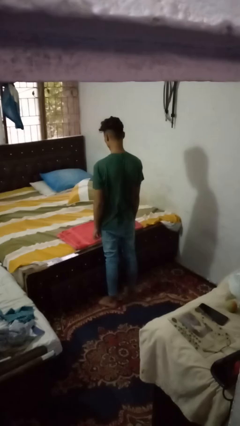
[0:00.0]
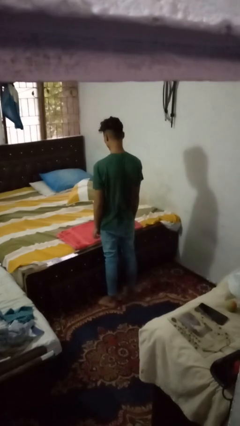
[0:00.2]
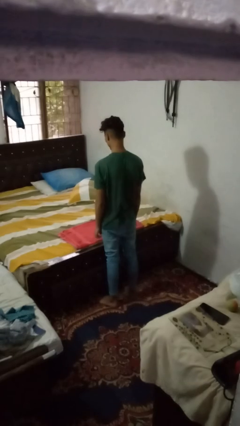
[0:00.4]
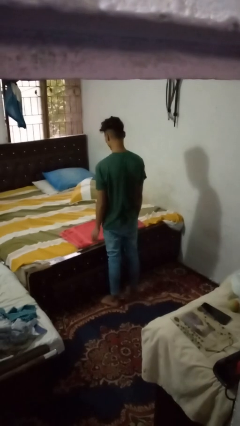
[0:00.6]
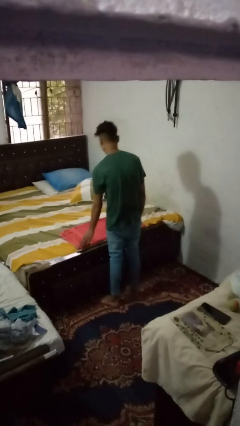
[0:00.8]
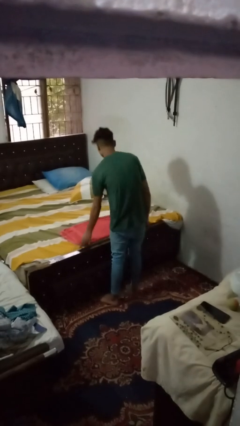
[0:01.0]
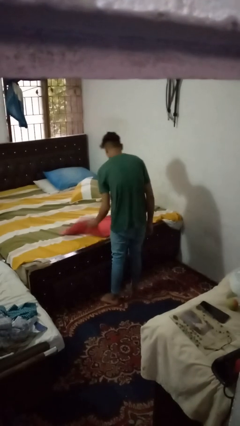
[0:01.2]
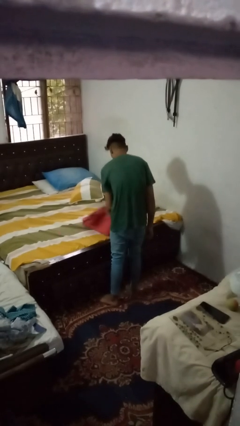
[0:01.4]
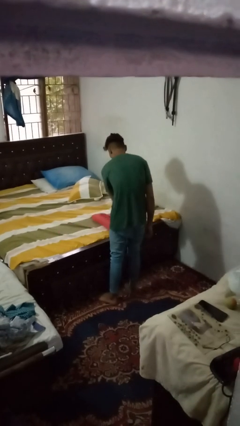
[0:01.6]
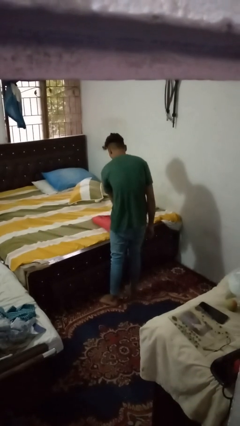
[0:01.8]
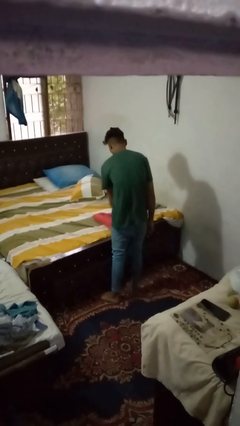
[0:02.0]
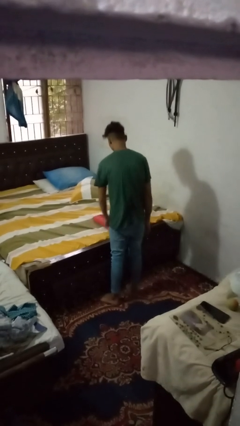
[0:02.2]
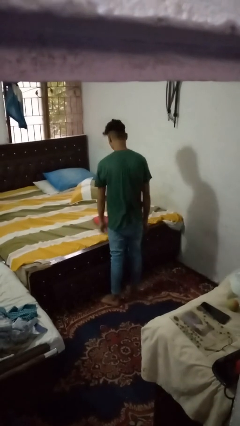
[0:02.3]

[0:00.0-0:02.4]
person folds towel

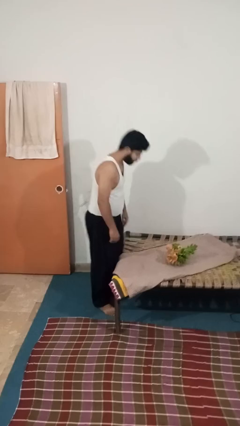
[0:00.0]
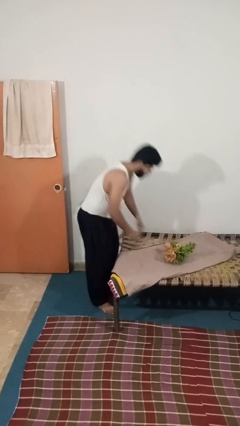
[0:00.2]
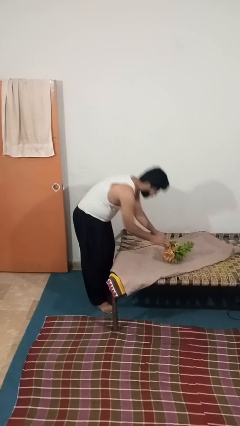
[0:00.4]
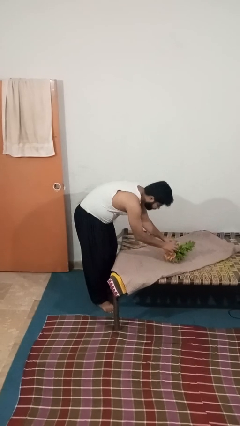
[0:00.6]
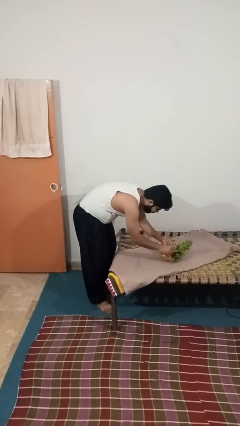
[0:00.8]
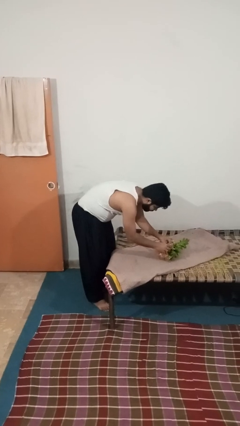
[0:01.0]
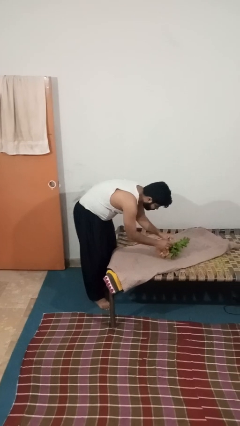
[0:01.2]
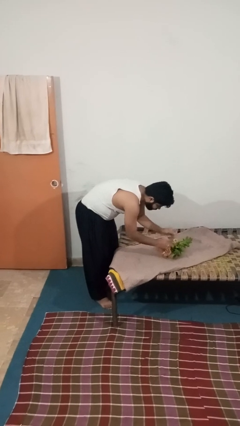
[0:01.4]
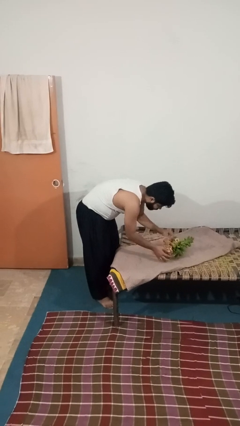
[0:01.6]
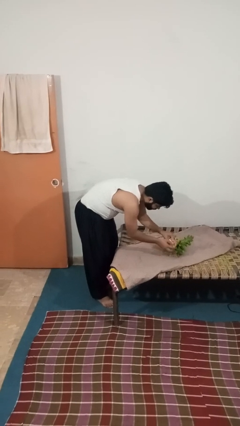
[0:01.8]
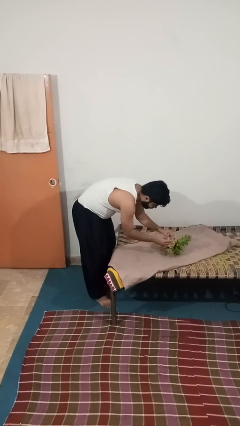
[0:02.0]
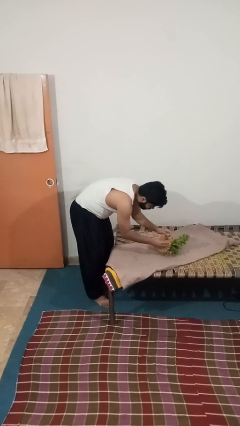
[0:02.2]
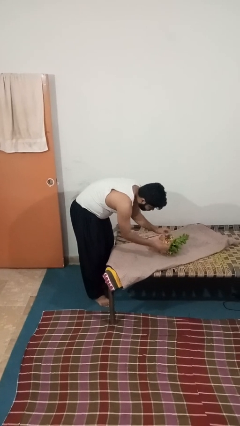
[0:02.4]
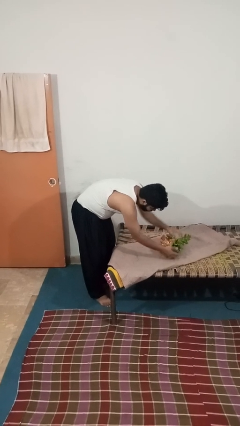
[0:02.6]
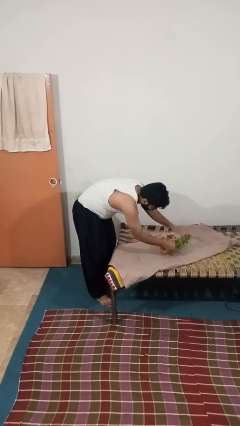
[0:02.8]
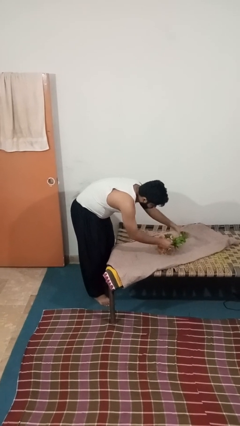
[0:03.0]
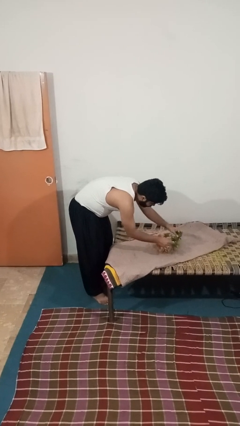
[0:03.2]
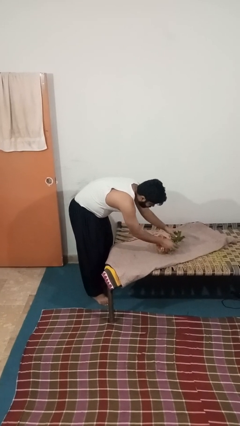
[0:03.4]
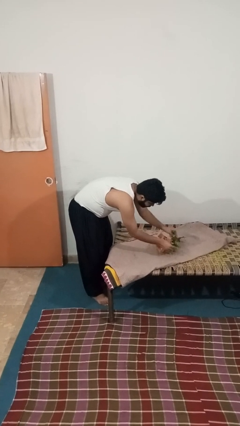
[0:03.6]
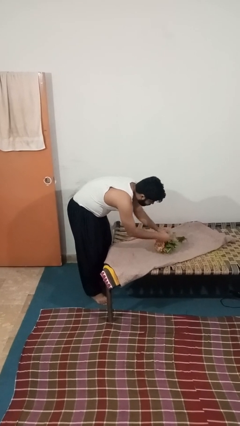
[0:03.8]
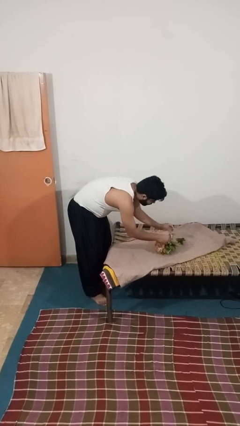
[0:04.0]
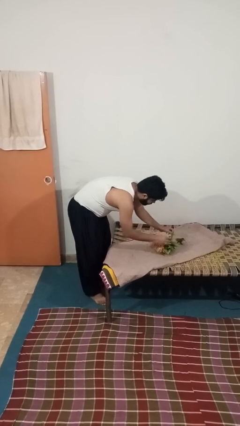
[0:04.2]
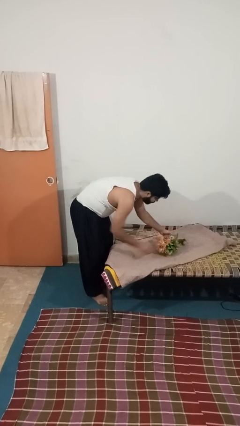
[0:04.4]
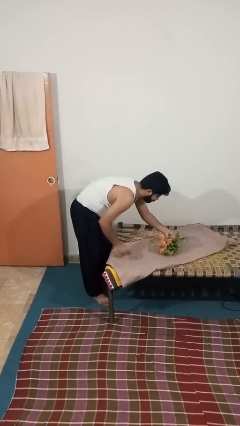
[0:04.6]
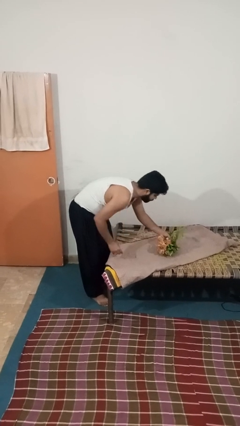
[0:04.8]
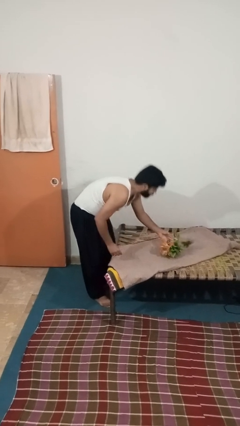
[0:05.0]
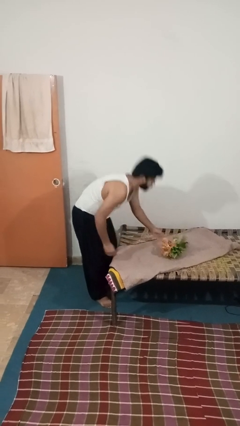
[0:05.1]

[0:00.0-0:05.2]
person arranges flowers in vase

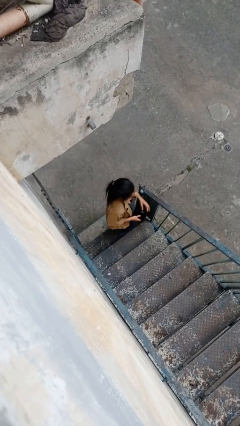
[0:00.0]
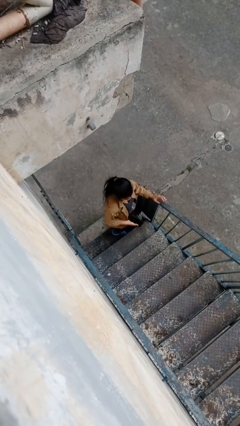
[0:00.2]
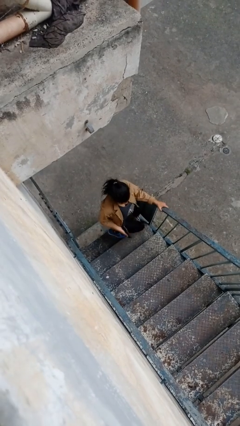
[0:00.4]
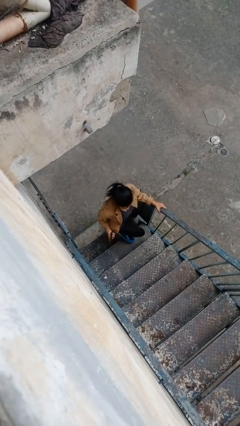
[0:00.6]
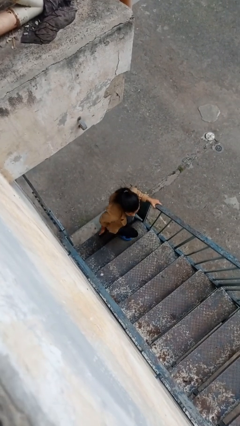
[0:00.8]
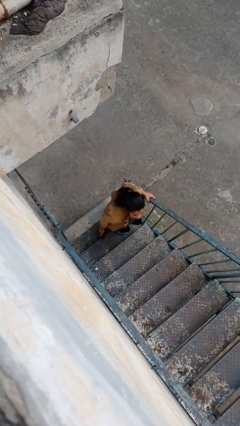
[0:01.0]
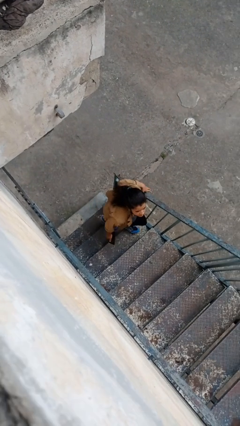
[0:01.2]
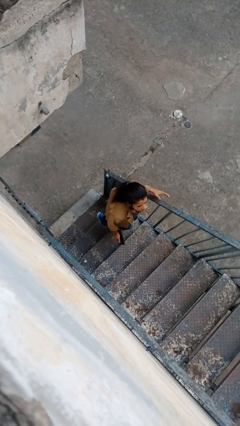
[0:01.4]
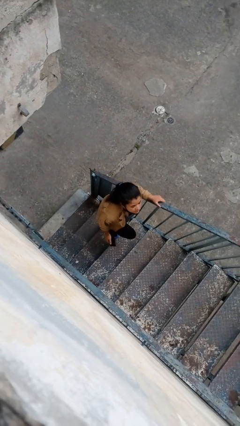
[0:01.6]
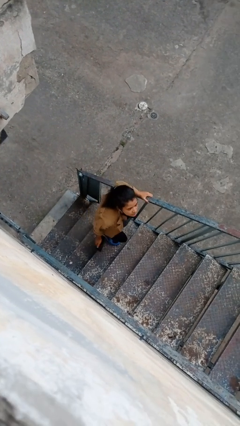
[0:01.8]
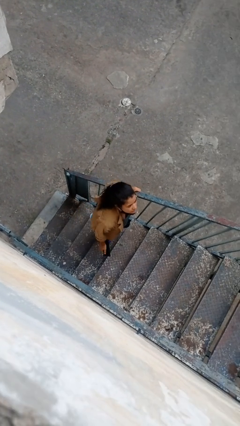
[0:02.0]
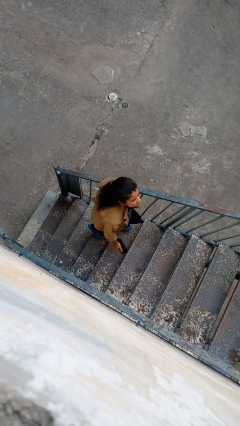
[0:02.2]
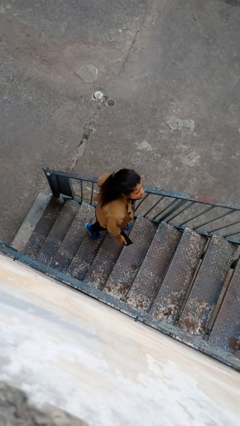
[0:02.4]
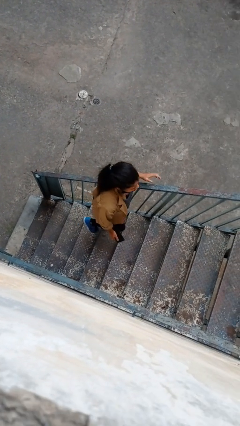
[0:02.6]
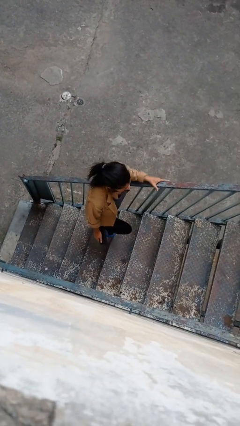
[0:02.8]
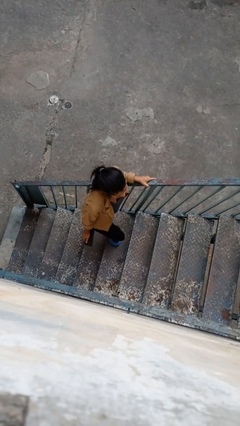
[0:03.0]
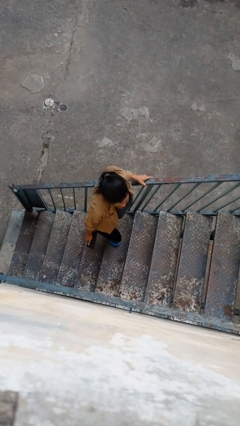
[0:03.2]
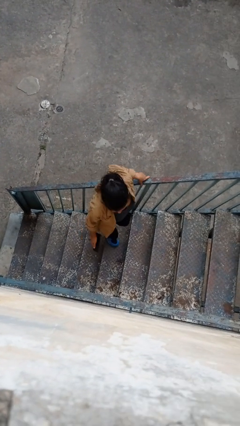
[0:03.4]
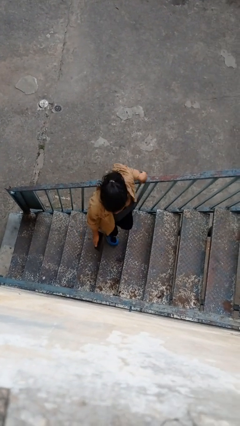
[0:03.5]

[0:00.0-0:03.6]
person climbs up stairs

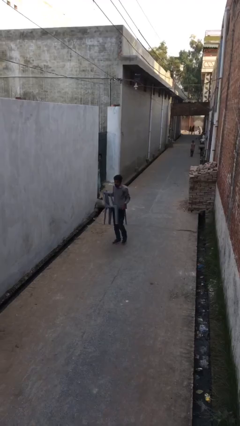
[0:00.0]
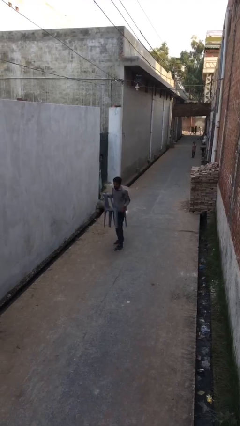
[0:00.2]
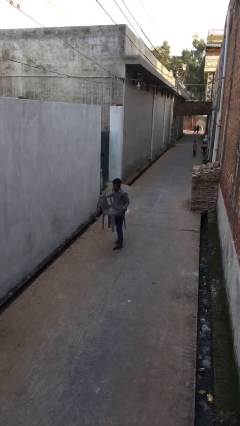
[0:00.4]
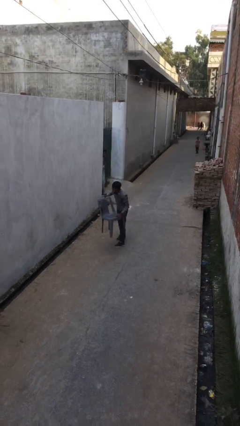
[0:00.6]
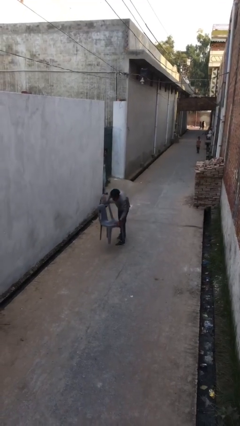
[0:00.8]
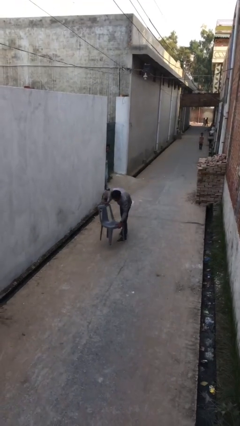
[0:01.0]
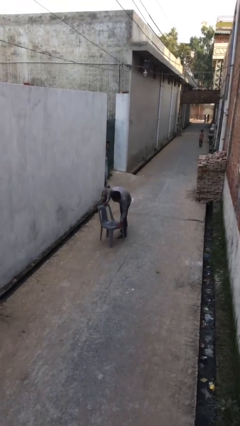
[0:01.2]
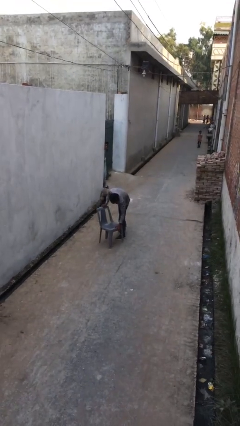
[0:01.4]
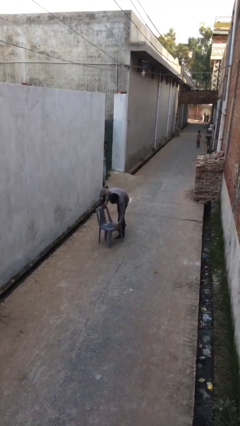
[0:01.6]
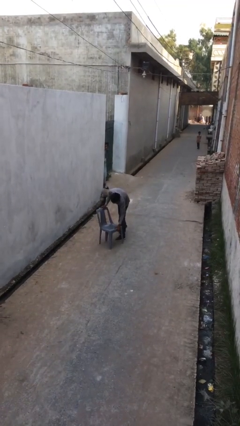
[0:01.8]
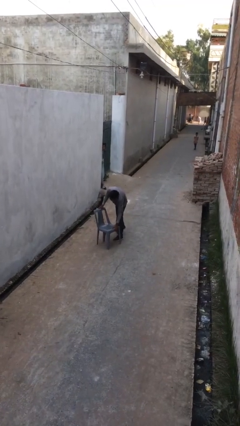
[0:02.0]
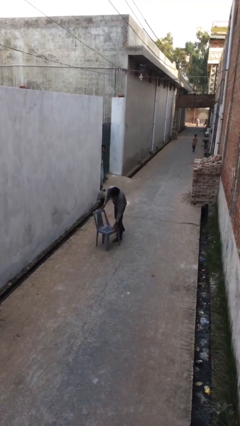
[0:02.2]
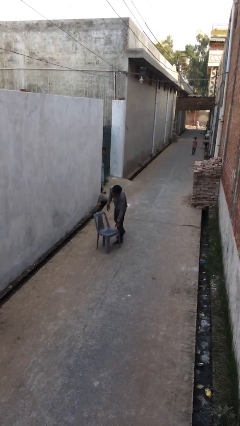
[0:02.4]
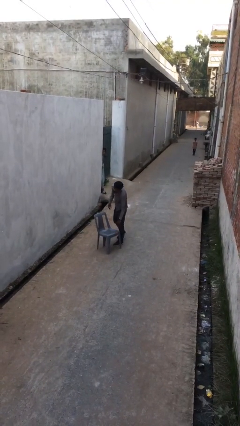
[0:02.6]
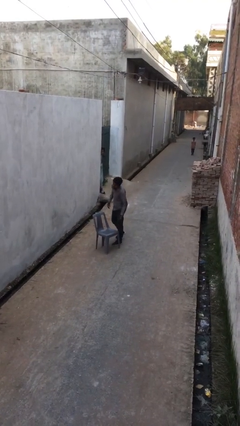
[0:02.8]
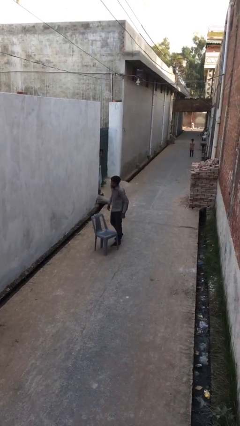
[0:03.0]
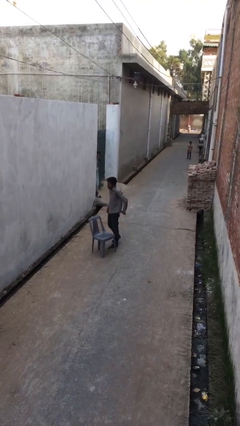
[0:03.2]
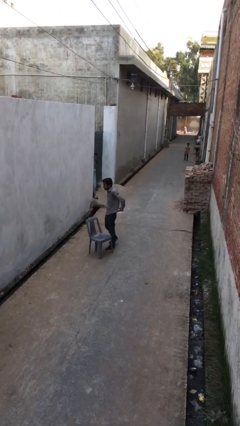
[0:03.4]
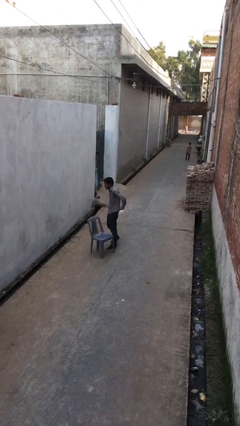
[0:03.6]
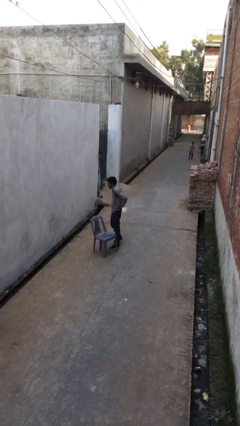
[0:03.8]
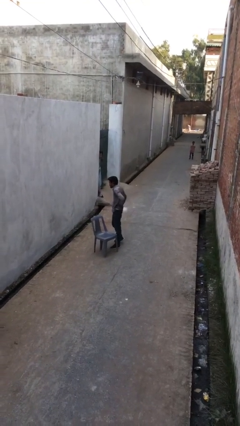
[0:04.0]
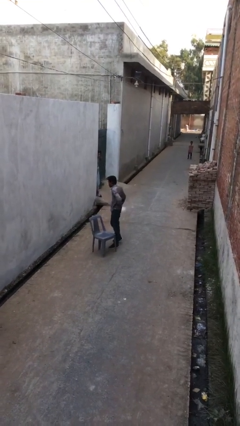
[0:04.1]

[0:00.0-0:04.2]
person puts down object on floor

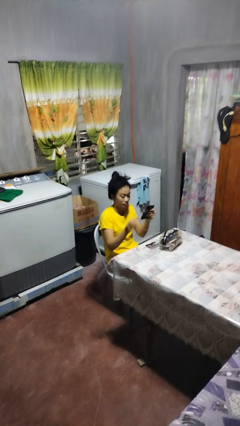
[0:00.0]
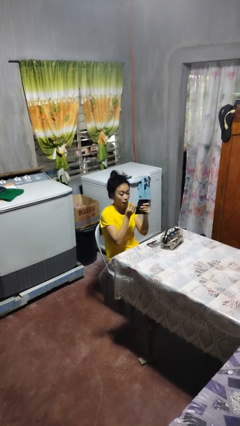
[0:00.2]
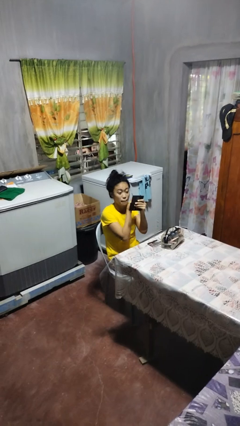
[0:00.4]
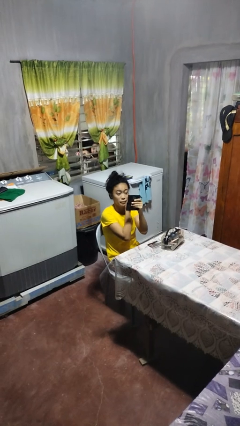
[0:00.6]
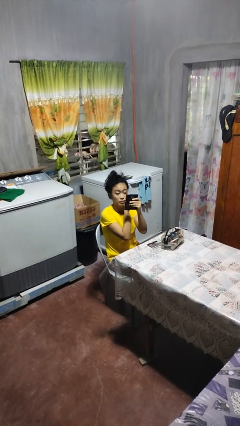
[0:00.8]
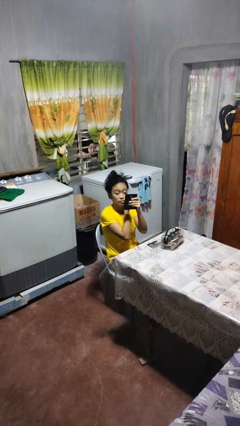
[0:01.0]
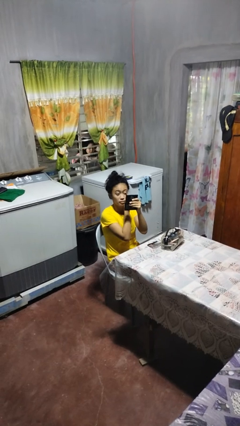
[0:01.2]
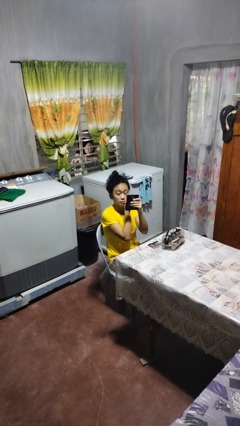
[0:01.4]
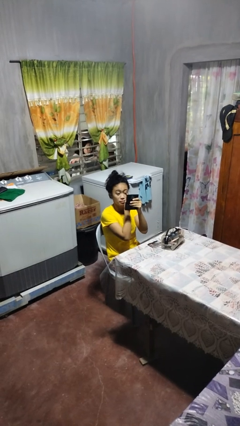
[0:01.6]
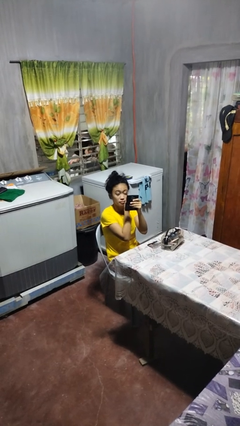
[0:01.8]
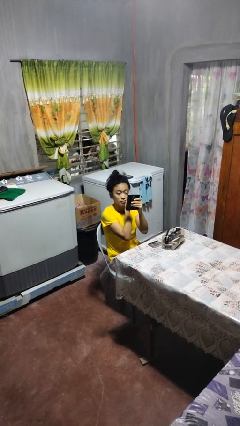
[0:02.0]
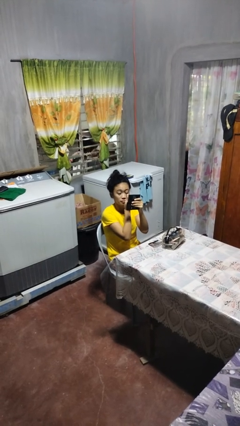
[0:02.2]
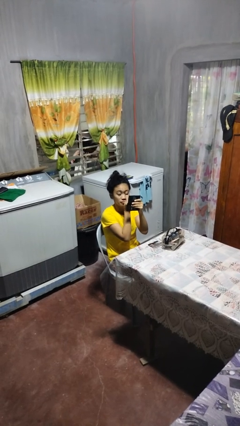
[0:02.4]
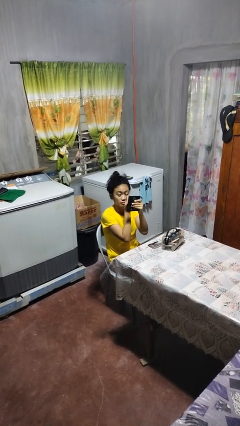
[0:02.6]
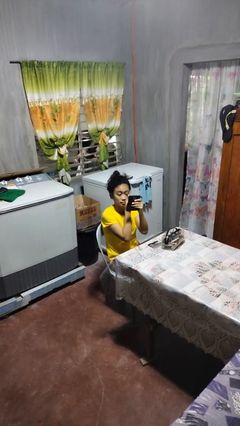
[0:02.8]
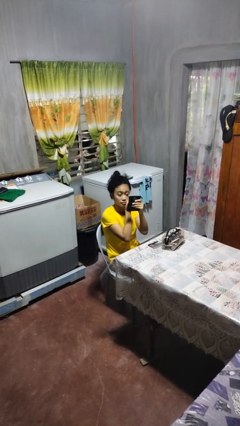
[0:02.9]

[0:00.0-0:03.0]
person applies eye makeup
